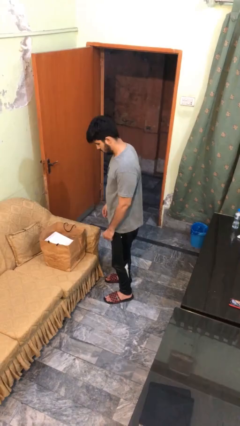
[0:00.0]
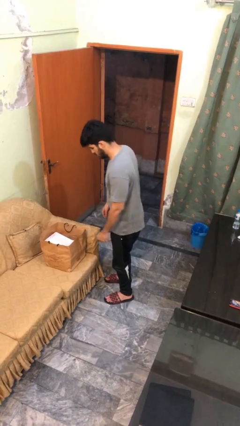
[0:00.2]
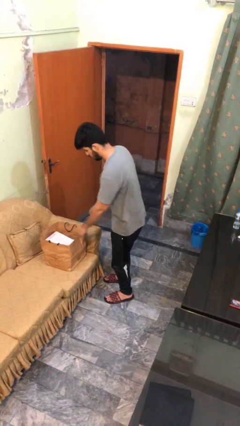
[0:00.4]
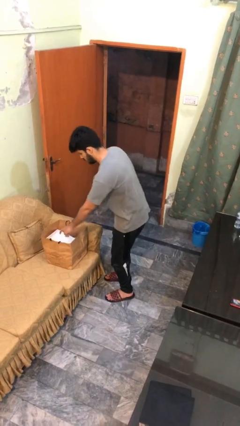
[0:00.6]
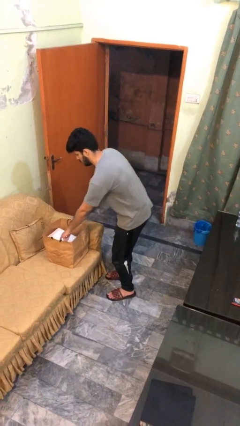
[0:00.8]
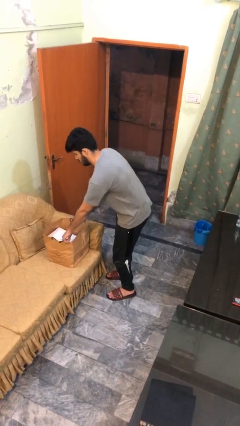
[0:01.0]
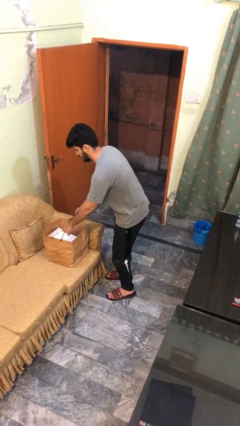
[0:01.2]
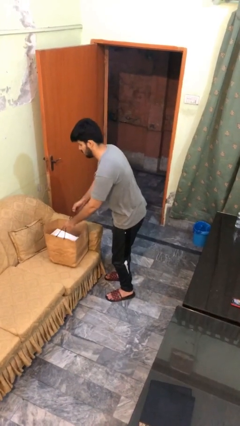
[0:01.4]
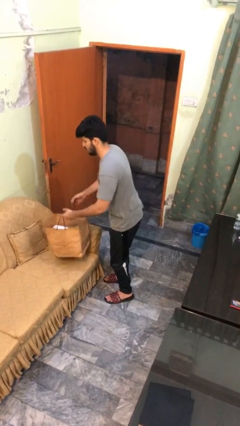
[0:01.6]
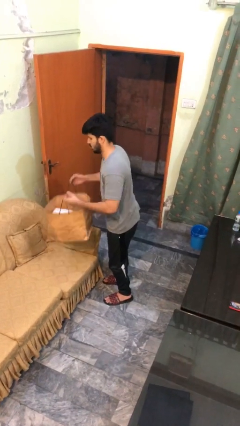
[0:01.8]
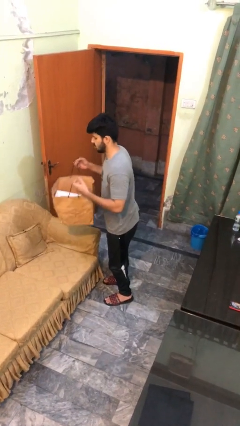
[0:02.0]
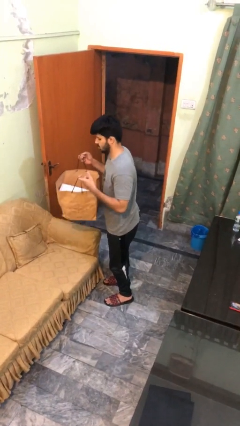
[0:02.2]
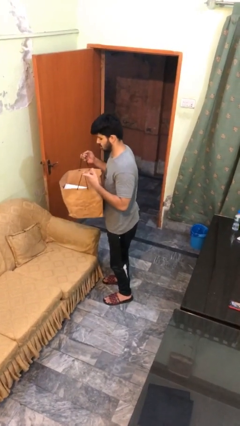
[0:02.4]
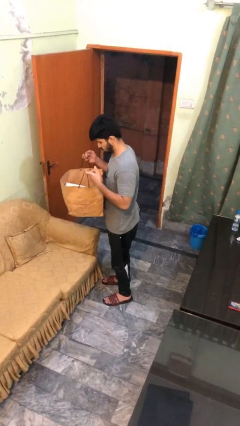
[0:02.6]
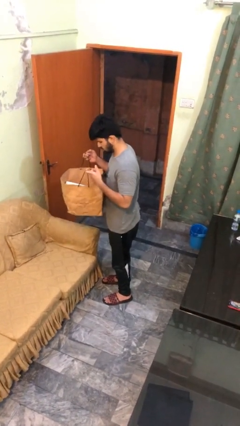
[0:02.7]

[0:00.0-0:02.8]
person picks up object from couch

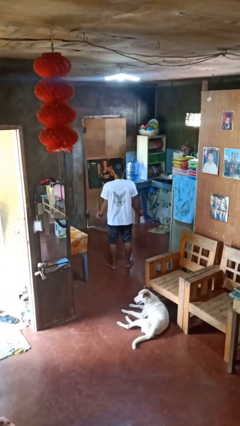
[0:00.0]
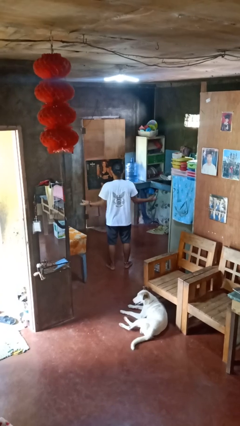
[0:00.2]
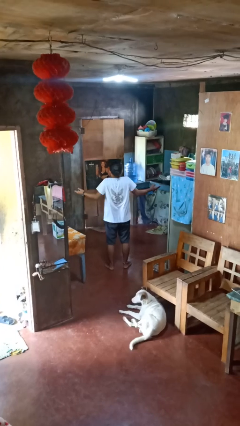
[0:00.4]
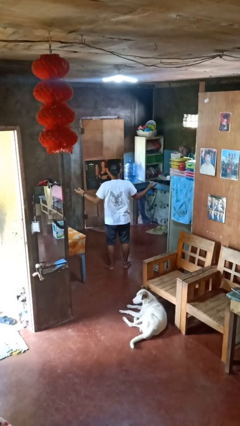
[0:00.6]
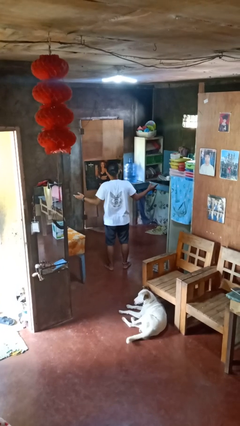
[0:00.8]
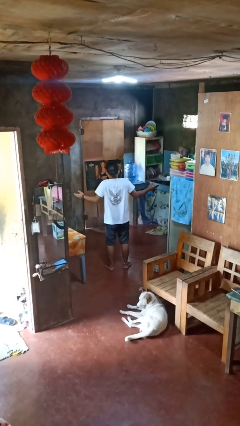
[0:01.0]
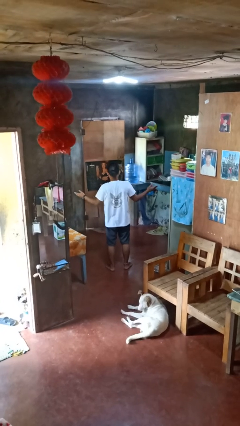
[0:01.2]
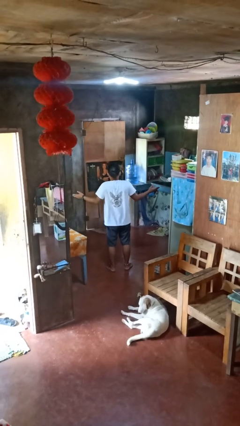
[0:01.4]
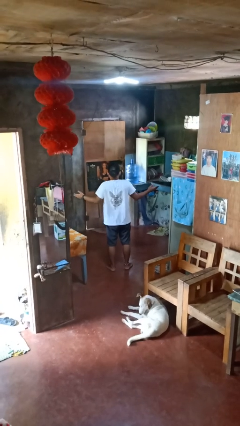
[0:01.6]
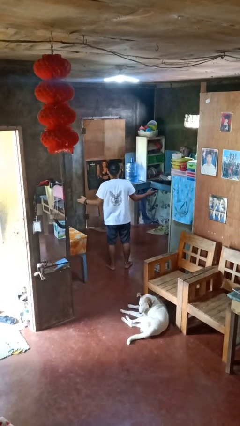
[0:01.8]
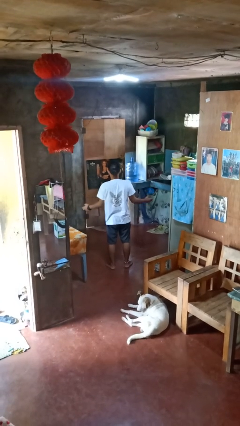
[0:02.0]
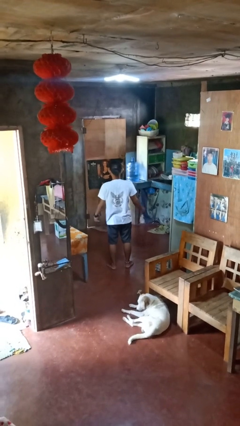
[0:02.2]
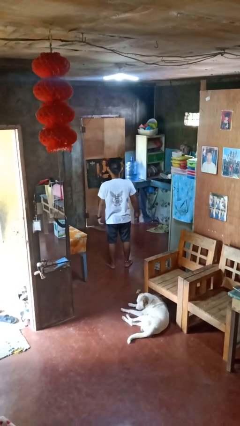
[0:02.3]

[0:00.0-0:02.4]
person shrugs

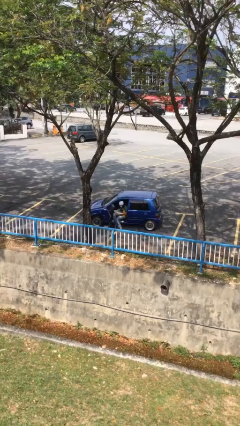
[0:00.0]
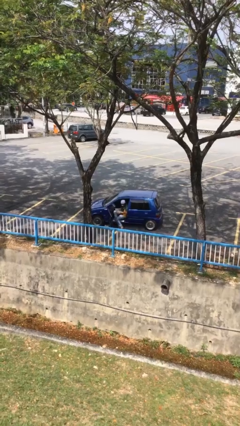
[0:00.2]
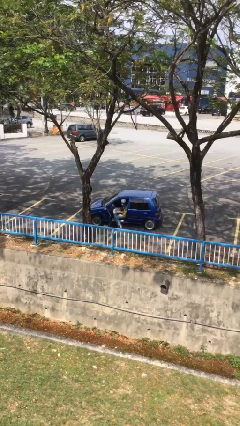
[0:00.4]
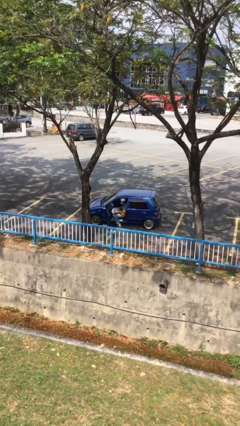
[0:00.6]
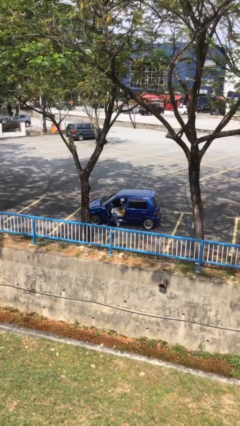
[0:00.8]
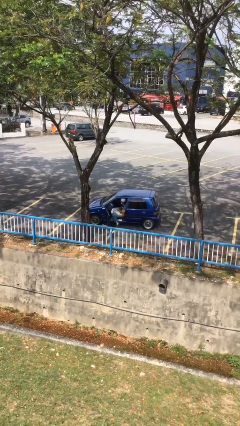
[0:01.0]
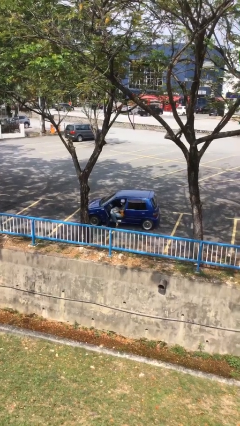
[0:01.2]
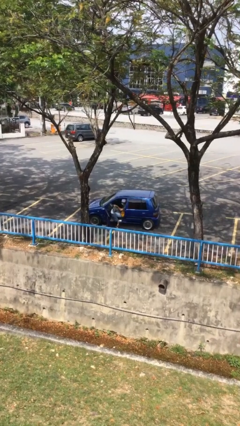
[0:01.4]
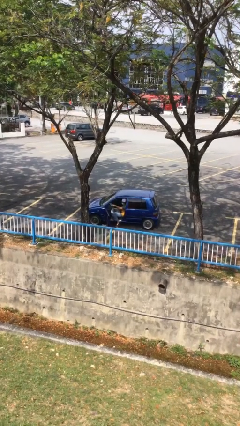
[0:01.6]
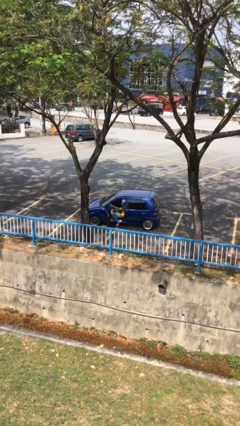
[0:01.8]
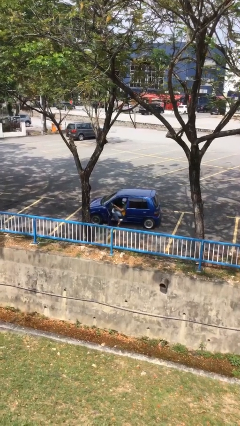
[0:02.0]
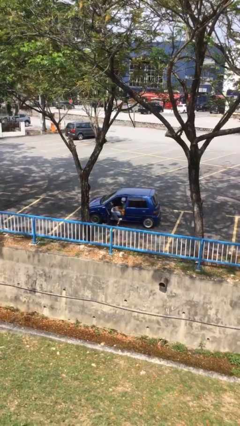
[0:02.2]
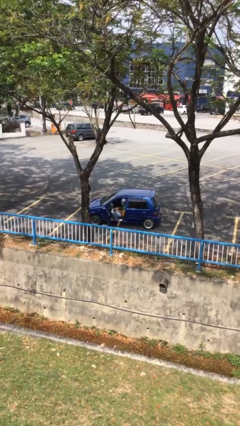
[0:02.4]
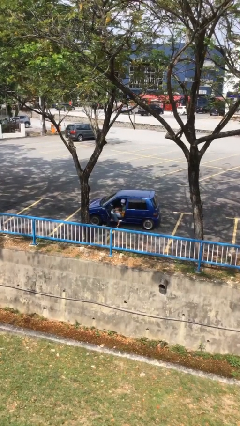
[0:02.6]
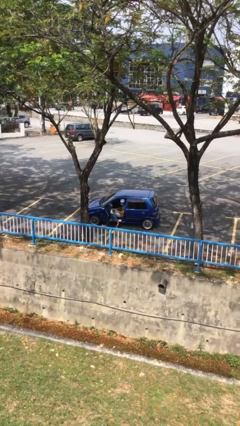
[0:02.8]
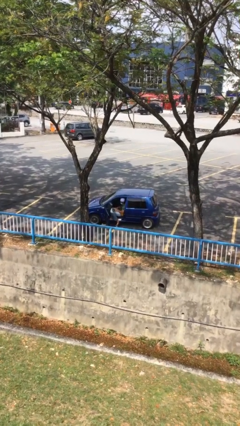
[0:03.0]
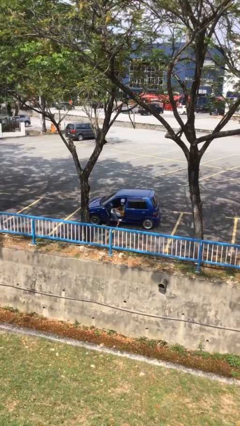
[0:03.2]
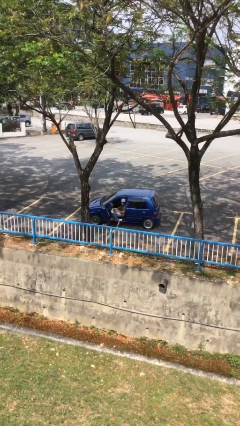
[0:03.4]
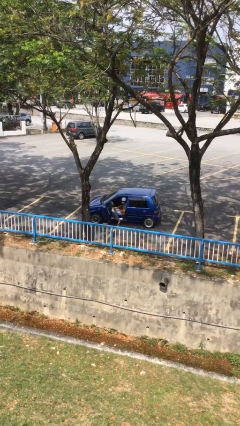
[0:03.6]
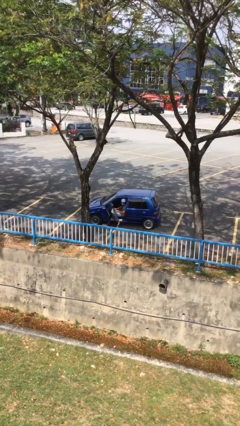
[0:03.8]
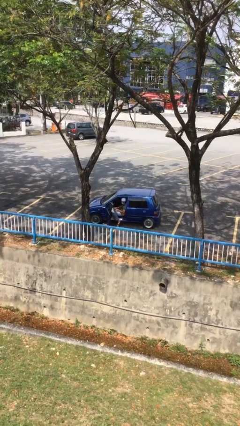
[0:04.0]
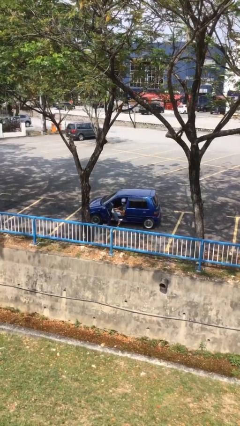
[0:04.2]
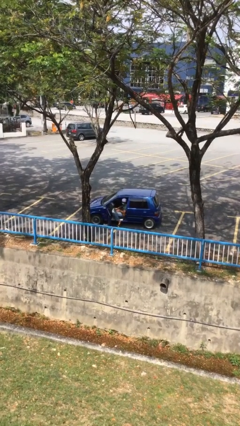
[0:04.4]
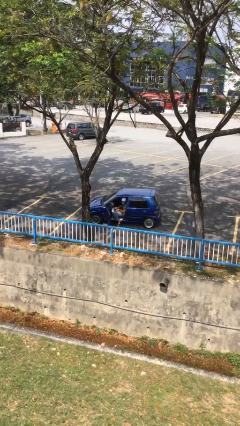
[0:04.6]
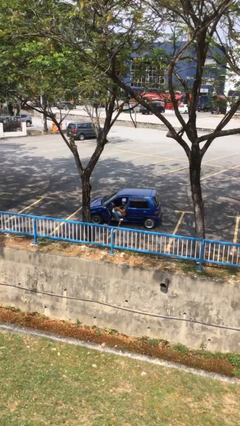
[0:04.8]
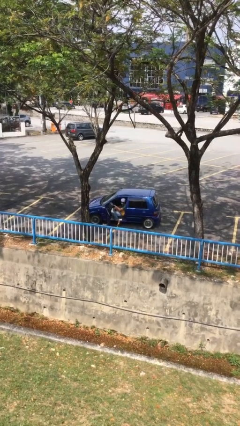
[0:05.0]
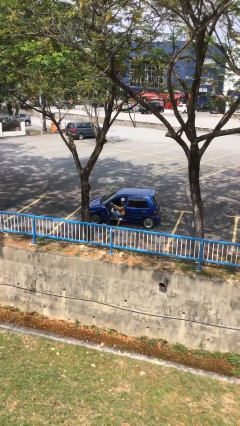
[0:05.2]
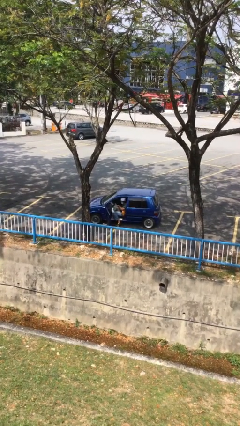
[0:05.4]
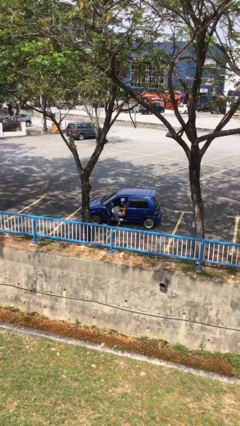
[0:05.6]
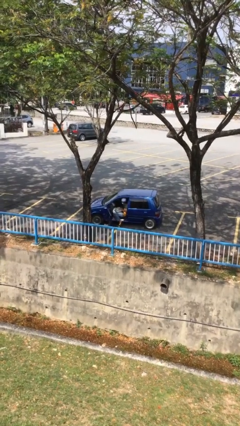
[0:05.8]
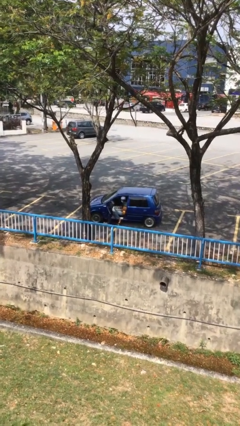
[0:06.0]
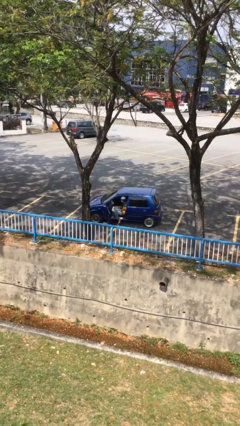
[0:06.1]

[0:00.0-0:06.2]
person interacts with laptop

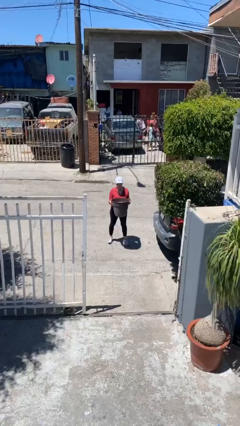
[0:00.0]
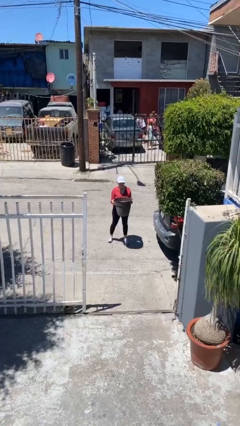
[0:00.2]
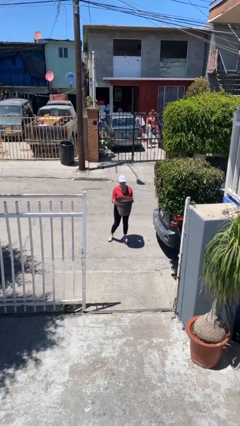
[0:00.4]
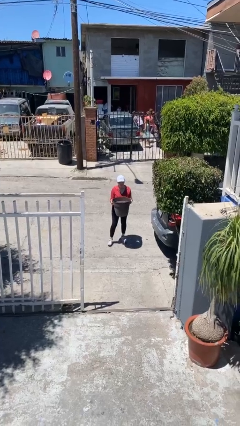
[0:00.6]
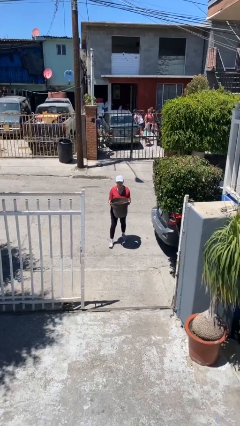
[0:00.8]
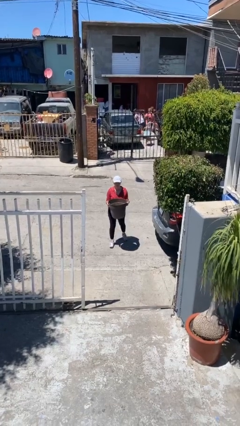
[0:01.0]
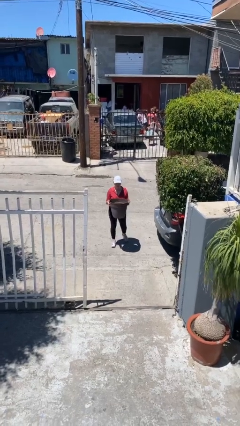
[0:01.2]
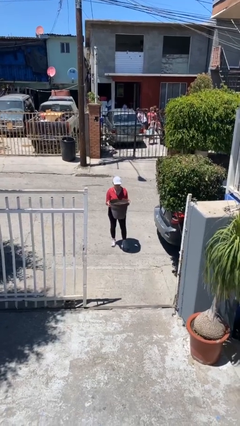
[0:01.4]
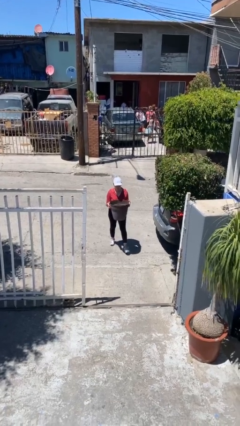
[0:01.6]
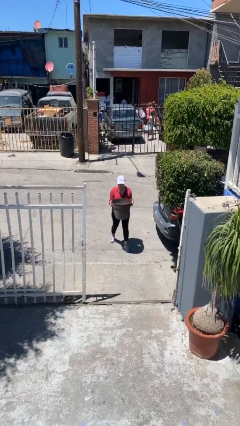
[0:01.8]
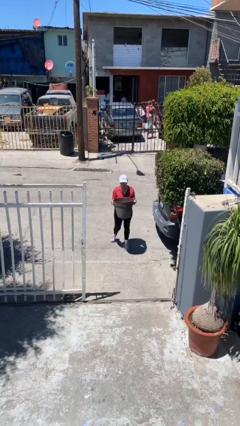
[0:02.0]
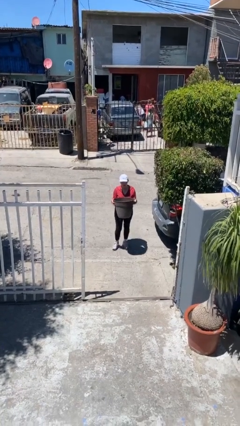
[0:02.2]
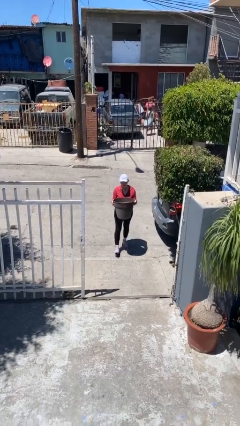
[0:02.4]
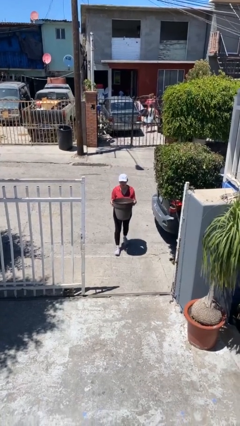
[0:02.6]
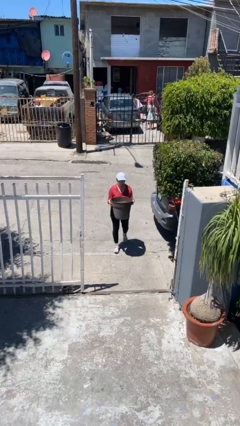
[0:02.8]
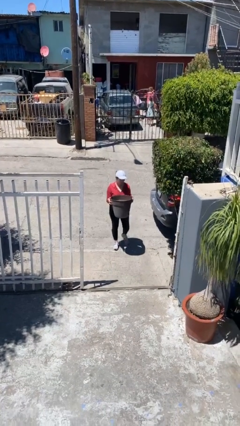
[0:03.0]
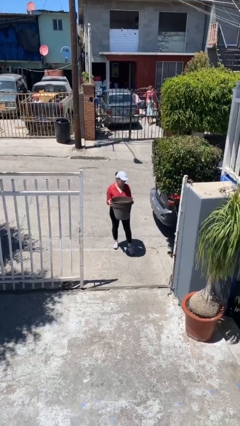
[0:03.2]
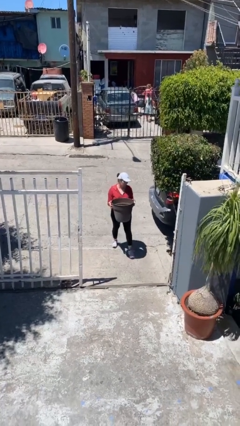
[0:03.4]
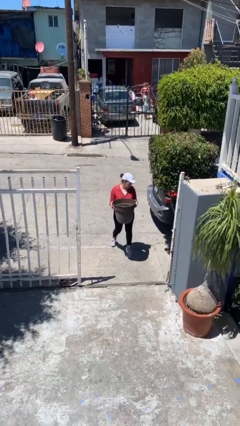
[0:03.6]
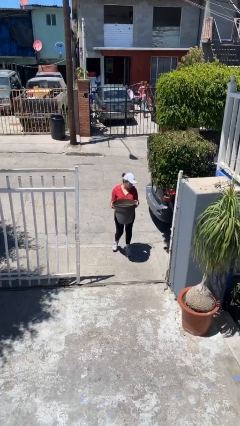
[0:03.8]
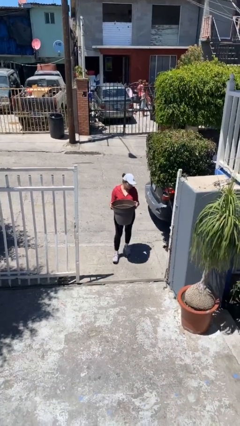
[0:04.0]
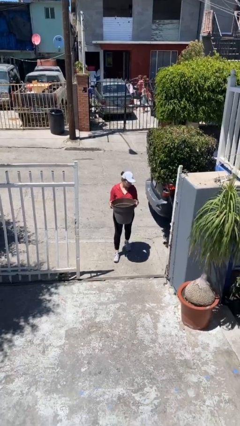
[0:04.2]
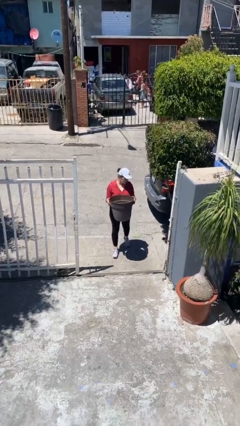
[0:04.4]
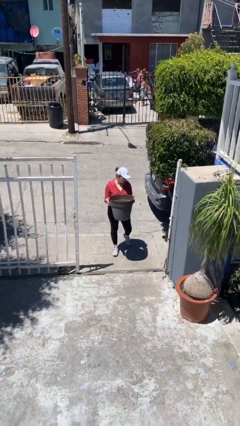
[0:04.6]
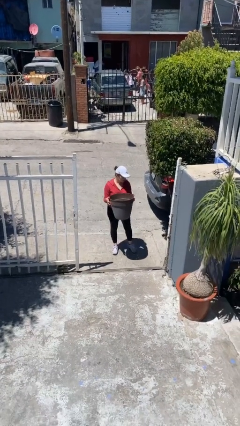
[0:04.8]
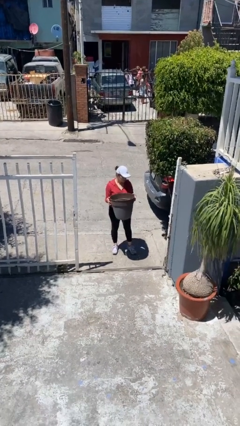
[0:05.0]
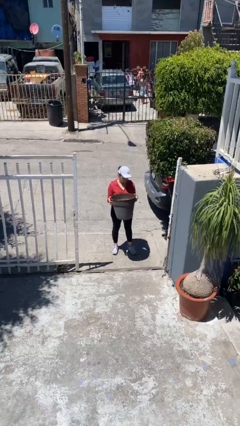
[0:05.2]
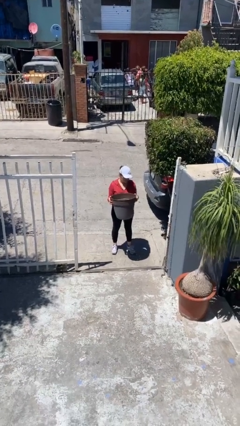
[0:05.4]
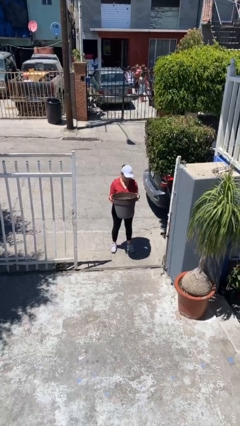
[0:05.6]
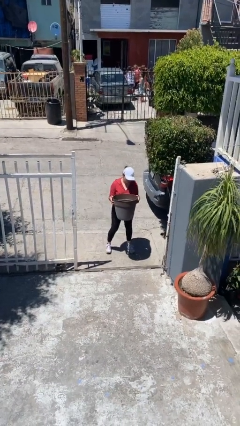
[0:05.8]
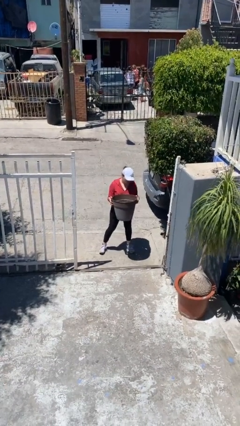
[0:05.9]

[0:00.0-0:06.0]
person carries heavy object

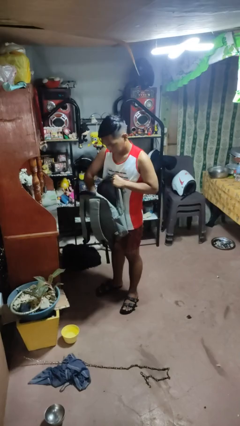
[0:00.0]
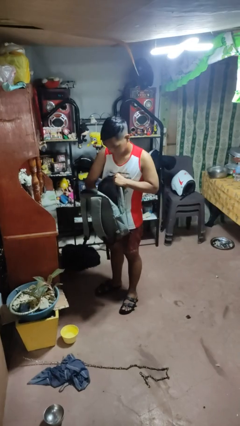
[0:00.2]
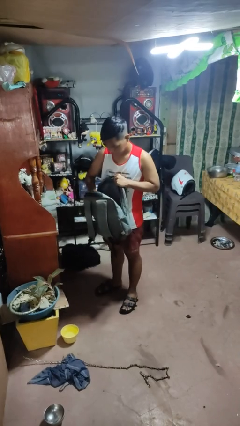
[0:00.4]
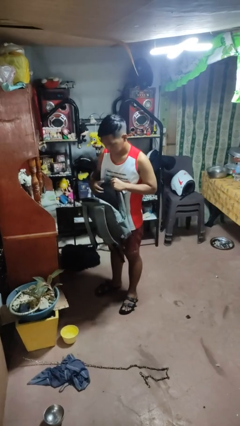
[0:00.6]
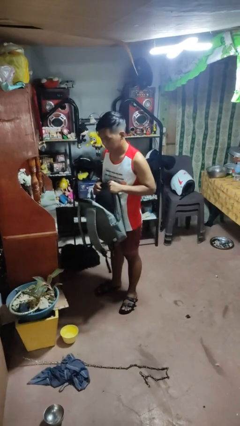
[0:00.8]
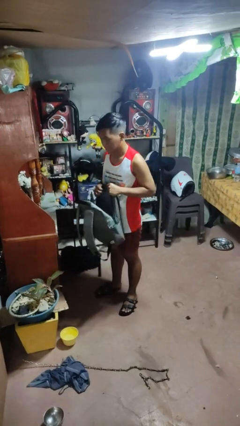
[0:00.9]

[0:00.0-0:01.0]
person puts object into bag
